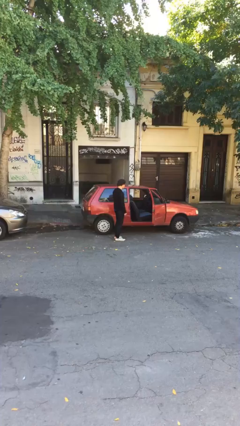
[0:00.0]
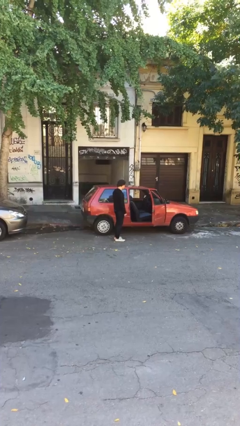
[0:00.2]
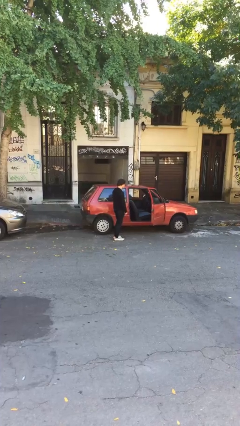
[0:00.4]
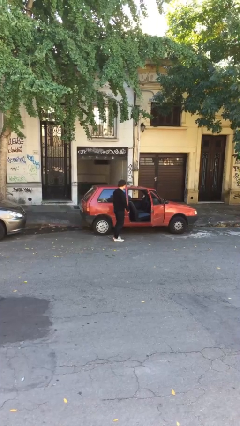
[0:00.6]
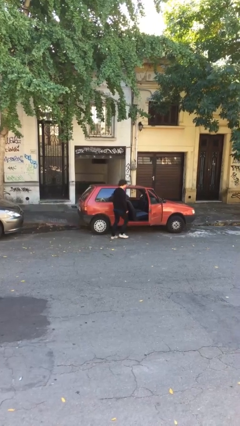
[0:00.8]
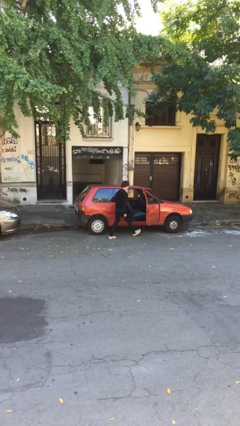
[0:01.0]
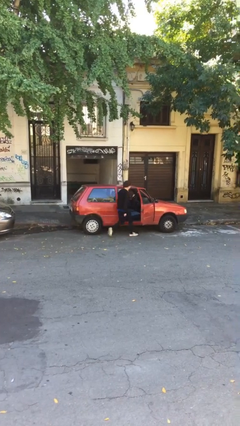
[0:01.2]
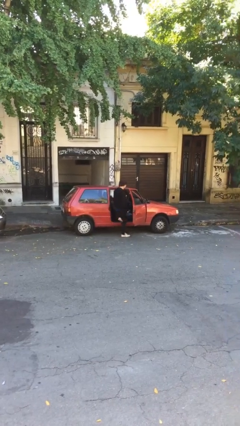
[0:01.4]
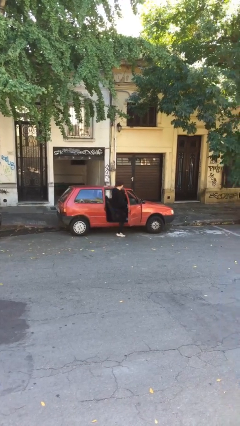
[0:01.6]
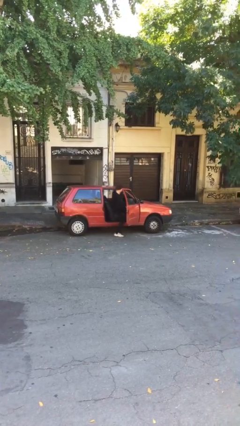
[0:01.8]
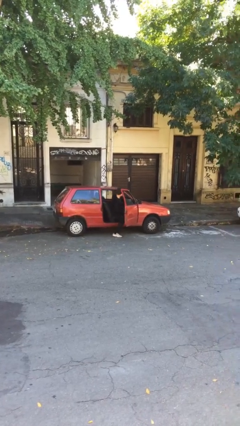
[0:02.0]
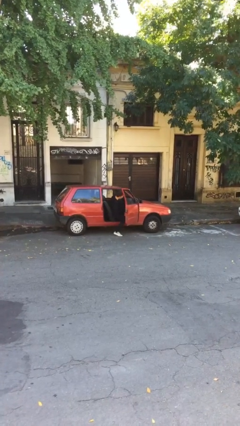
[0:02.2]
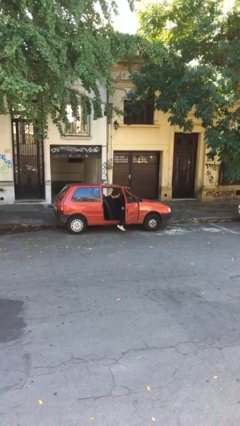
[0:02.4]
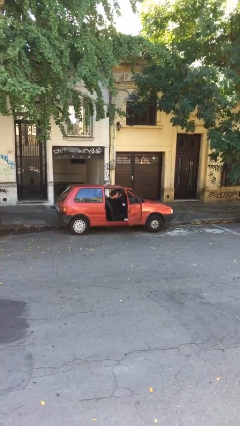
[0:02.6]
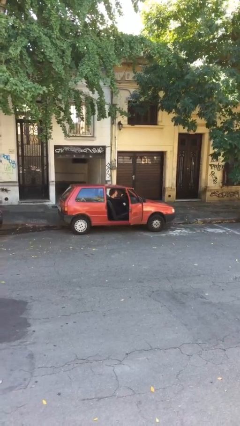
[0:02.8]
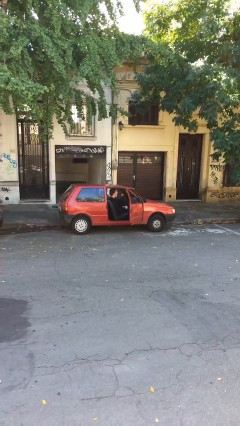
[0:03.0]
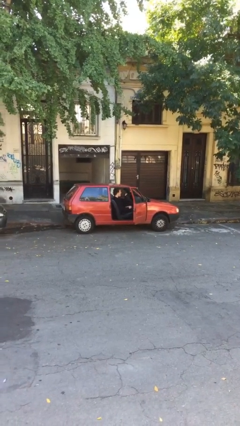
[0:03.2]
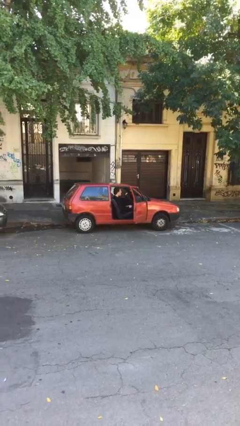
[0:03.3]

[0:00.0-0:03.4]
person enters car

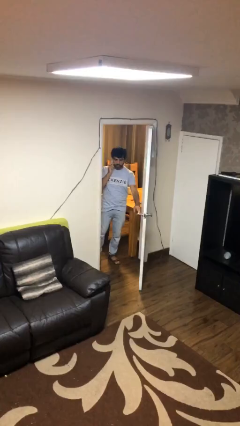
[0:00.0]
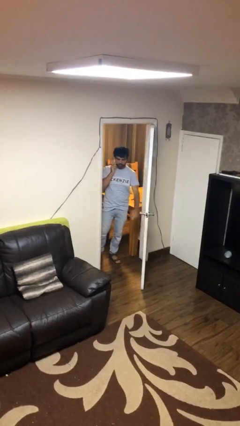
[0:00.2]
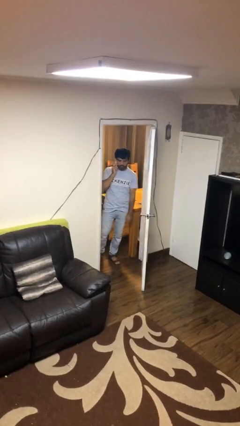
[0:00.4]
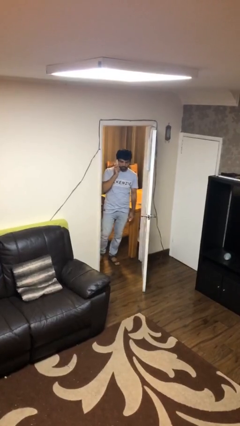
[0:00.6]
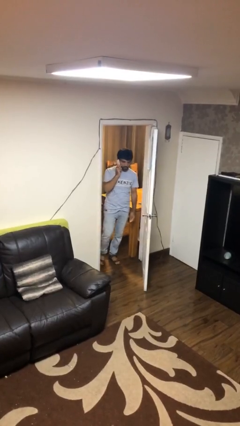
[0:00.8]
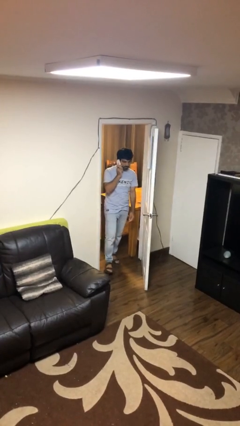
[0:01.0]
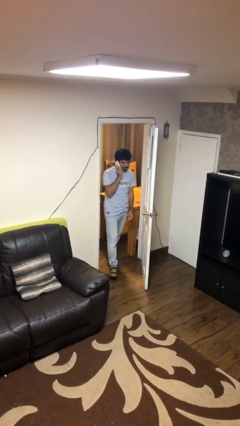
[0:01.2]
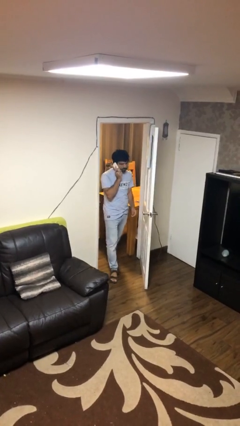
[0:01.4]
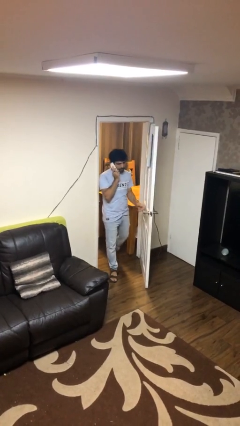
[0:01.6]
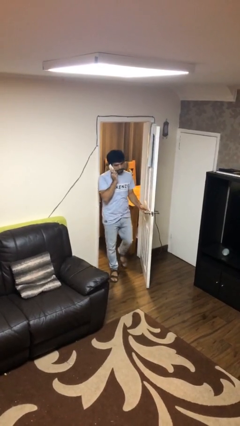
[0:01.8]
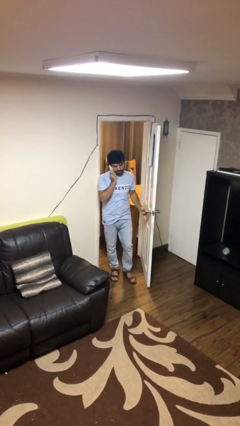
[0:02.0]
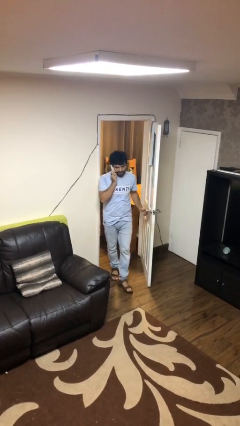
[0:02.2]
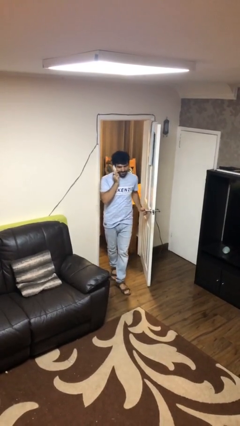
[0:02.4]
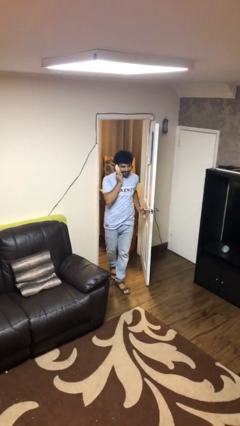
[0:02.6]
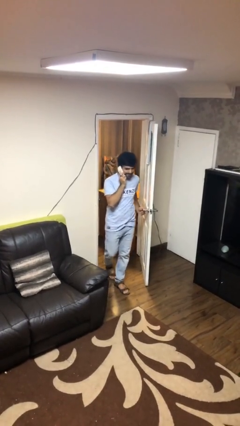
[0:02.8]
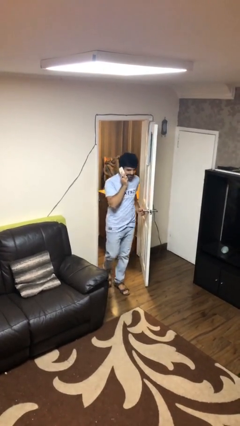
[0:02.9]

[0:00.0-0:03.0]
person enters scene through structure

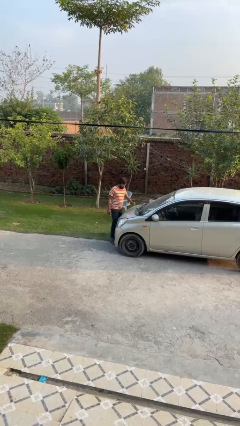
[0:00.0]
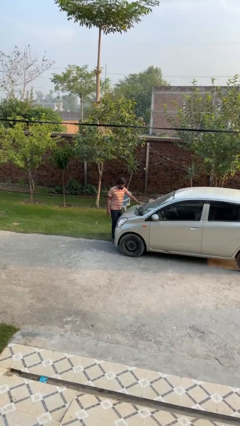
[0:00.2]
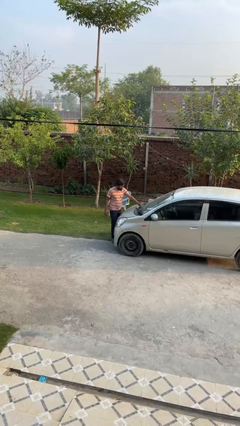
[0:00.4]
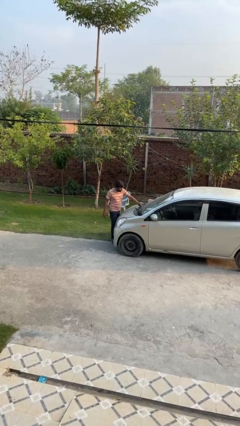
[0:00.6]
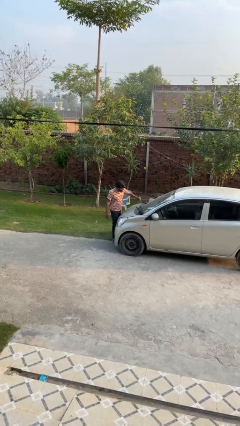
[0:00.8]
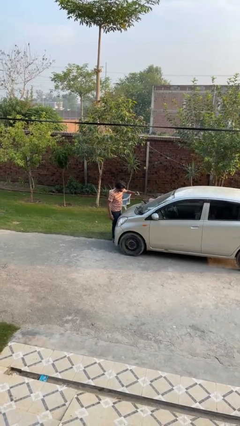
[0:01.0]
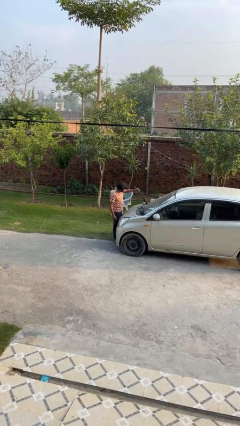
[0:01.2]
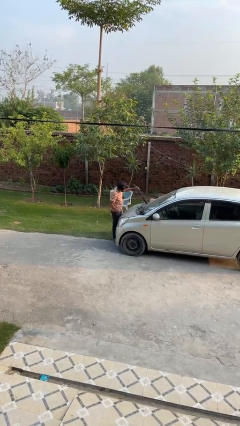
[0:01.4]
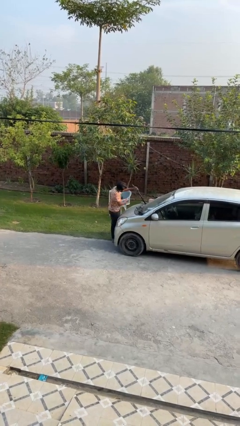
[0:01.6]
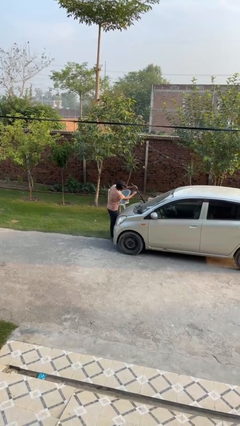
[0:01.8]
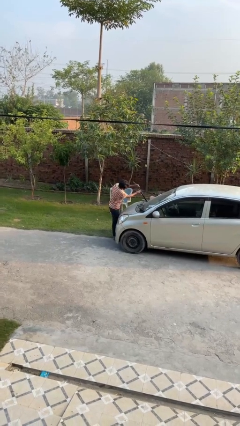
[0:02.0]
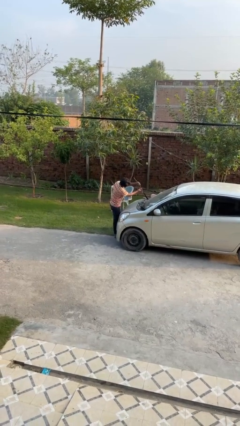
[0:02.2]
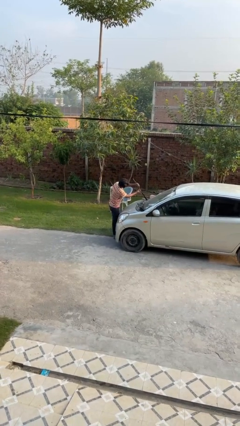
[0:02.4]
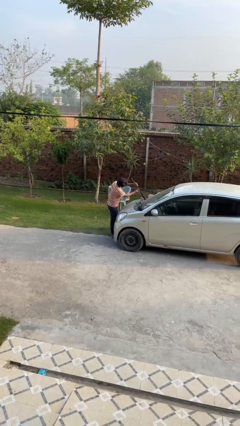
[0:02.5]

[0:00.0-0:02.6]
person flips up car wipers

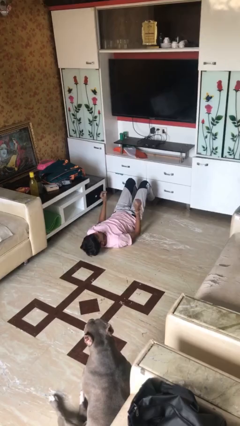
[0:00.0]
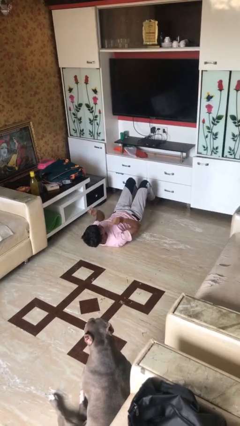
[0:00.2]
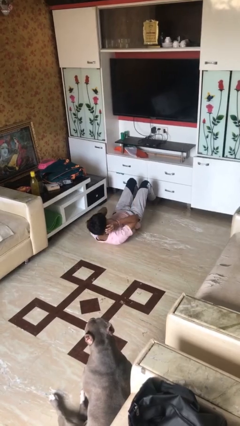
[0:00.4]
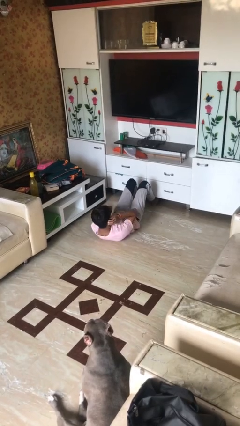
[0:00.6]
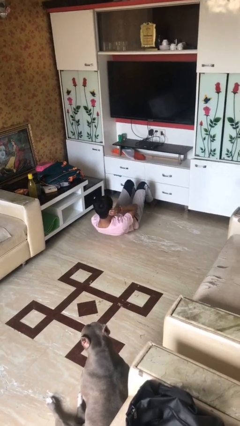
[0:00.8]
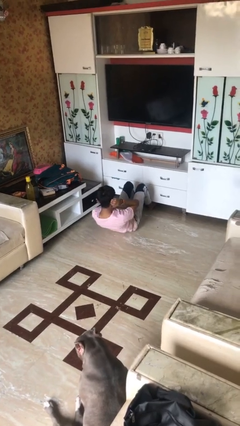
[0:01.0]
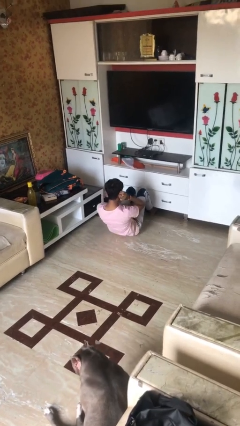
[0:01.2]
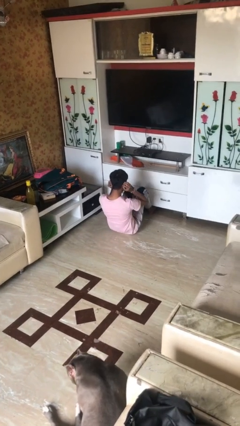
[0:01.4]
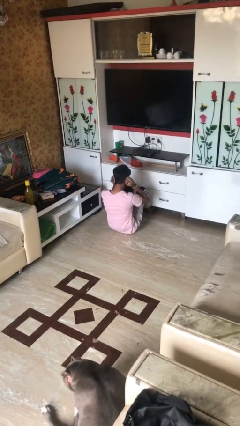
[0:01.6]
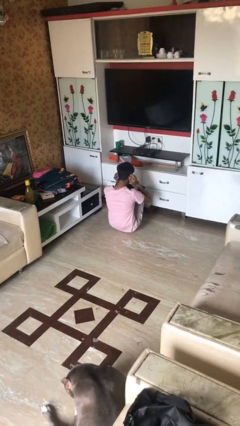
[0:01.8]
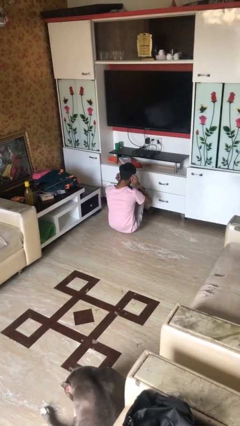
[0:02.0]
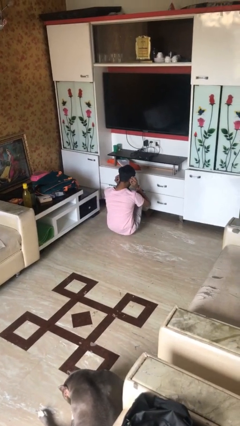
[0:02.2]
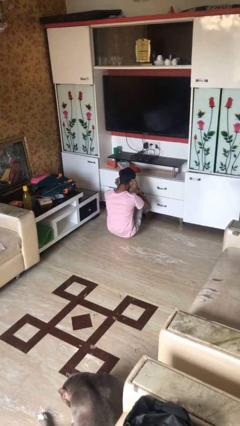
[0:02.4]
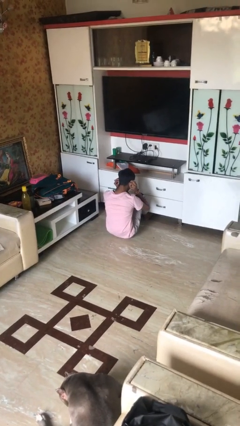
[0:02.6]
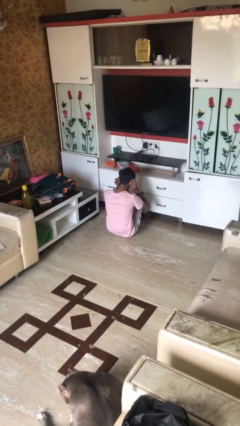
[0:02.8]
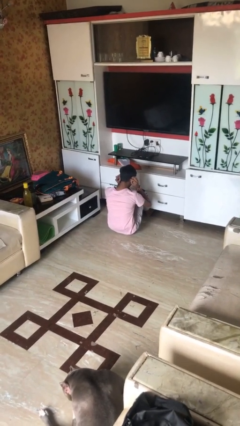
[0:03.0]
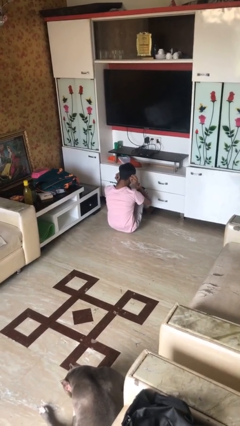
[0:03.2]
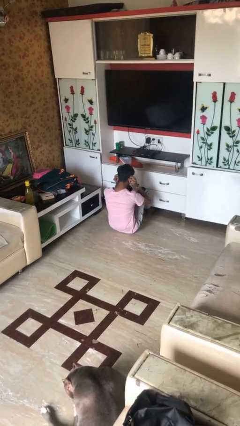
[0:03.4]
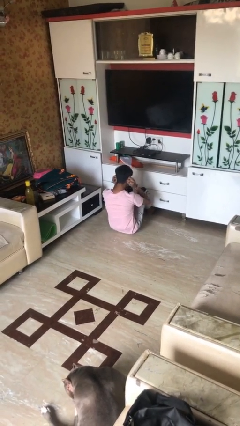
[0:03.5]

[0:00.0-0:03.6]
person exercises with situp

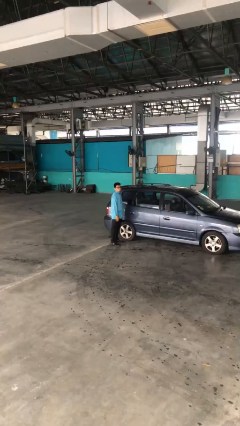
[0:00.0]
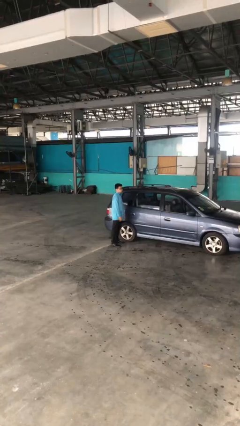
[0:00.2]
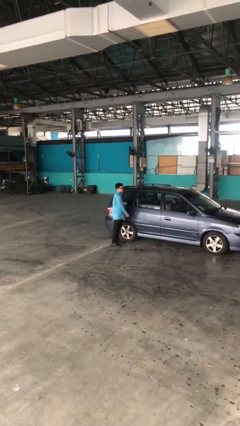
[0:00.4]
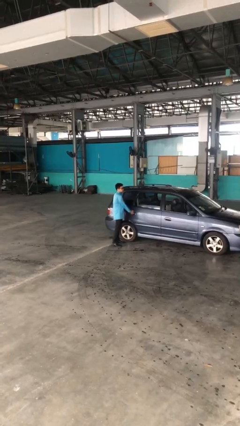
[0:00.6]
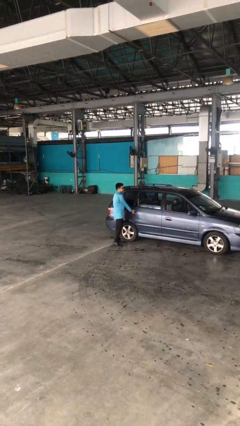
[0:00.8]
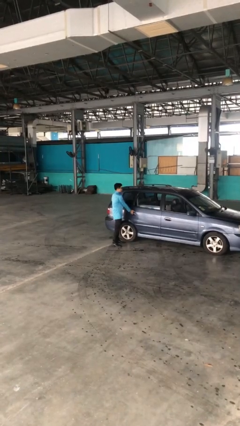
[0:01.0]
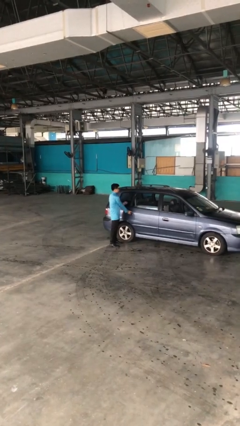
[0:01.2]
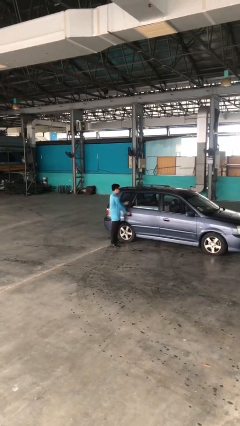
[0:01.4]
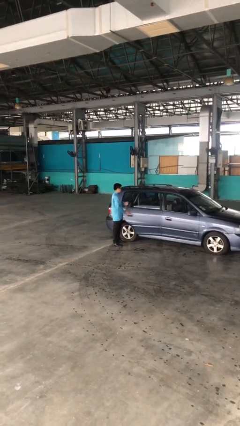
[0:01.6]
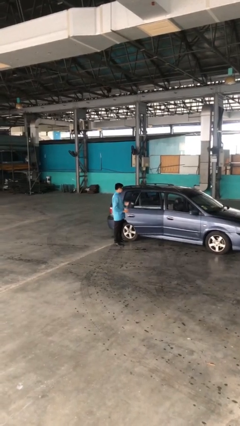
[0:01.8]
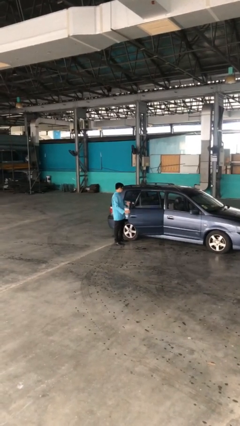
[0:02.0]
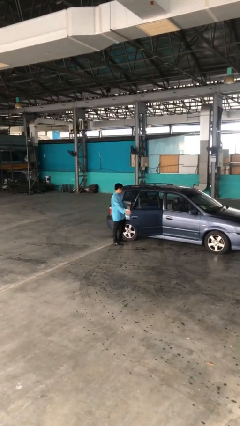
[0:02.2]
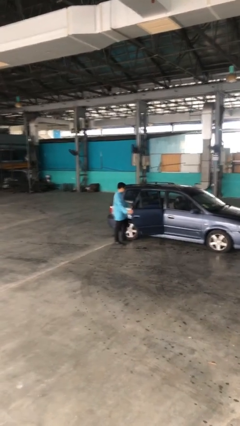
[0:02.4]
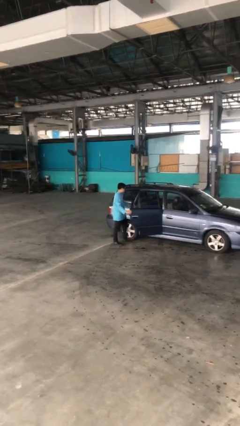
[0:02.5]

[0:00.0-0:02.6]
person opens car door

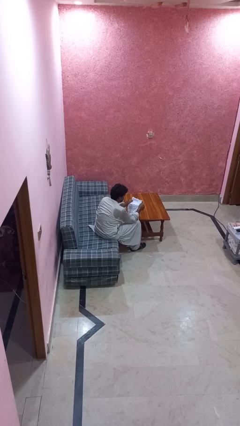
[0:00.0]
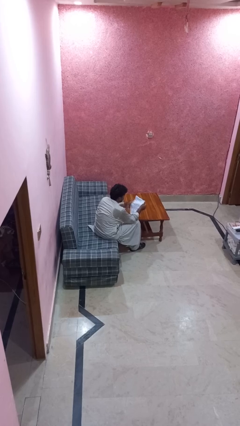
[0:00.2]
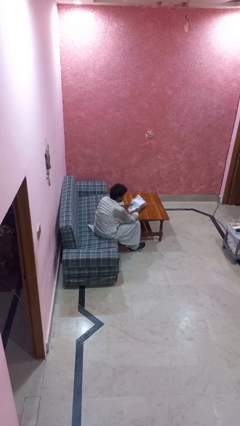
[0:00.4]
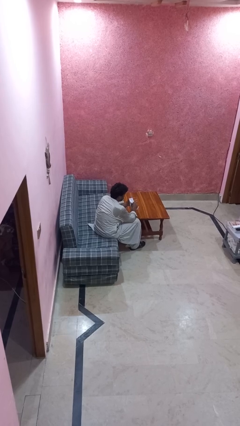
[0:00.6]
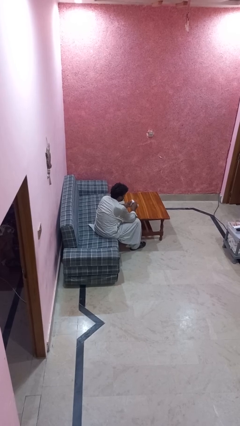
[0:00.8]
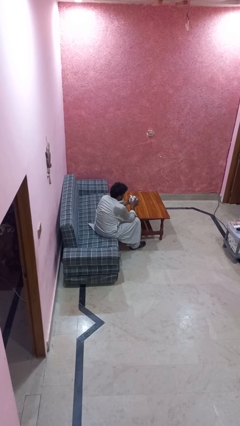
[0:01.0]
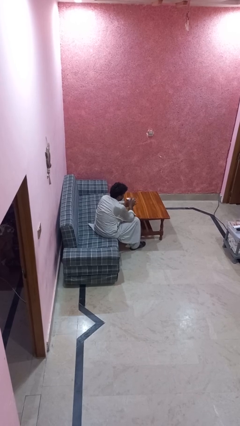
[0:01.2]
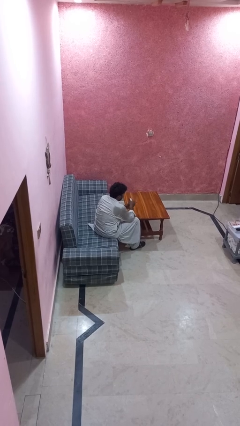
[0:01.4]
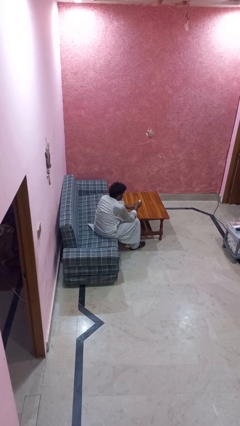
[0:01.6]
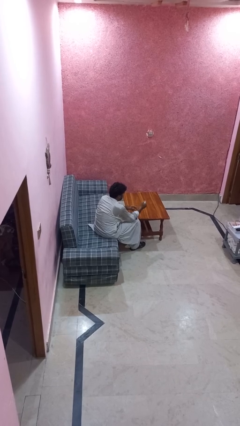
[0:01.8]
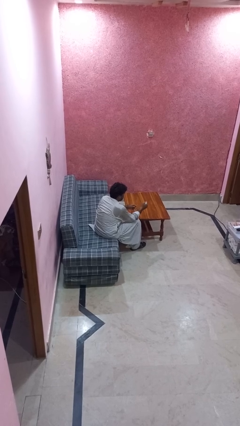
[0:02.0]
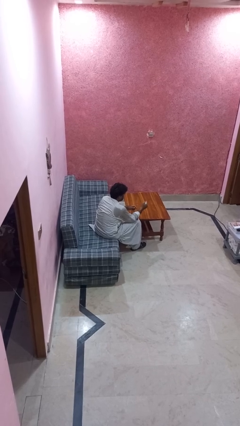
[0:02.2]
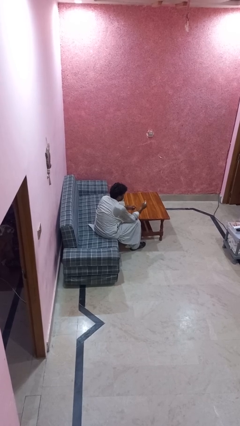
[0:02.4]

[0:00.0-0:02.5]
person crumples paper
